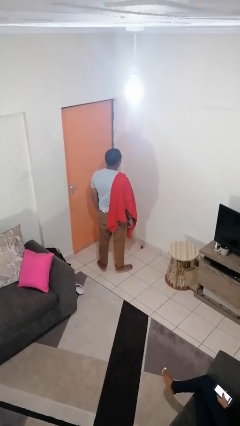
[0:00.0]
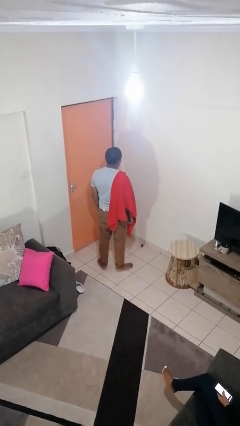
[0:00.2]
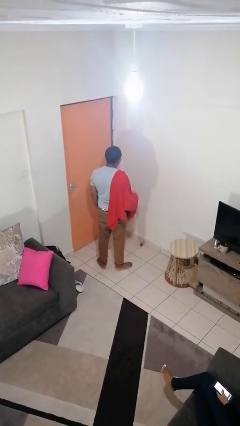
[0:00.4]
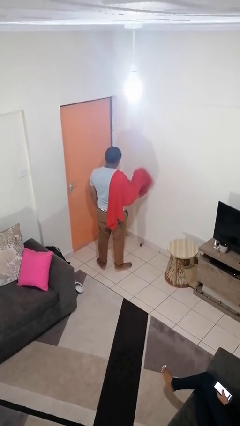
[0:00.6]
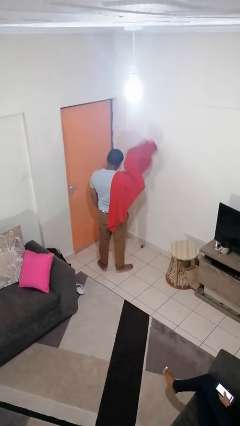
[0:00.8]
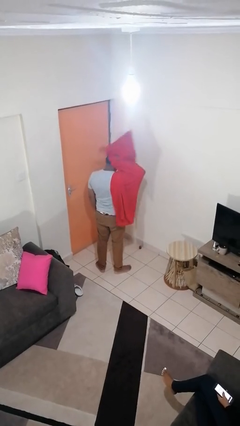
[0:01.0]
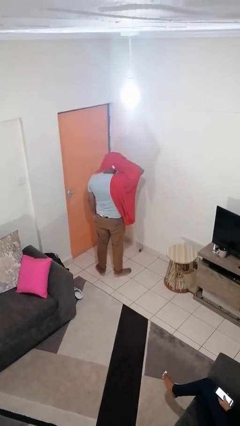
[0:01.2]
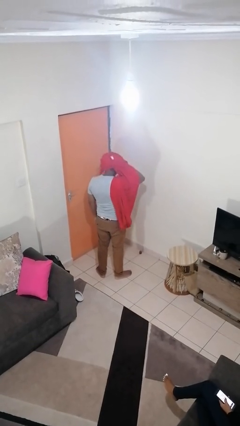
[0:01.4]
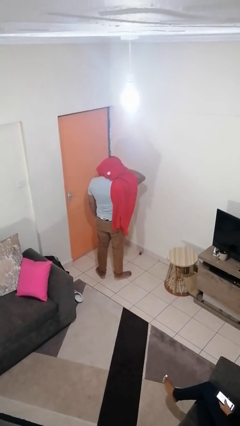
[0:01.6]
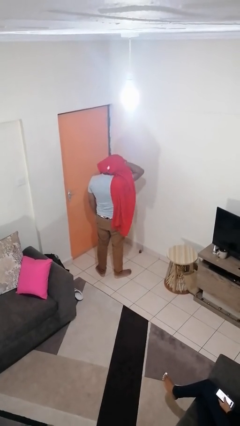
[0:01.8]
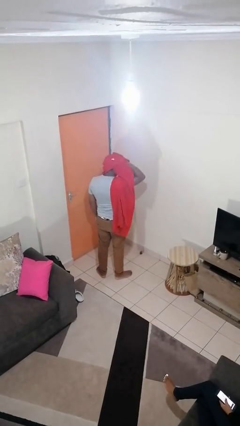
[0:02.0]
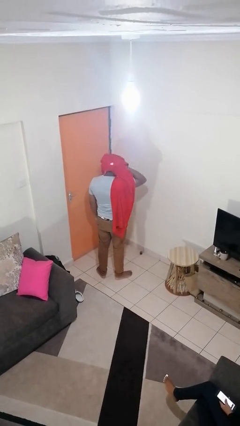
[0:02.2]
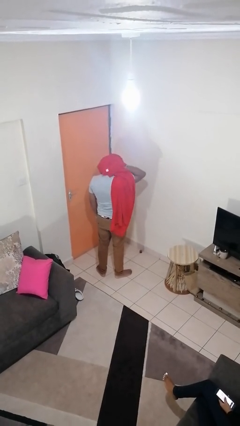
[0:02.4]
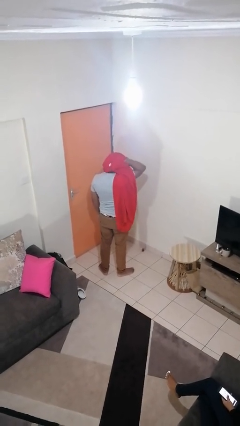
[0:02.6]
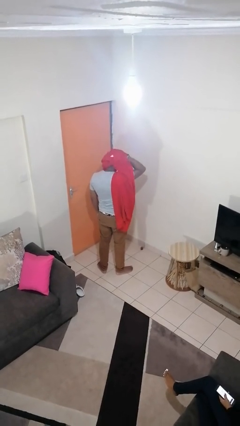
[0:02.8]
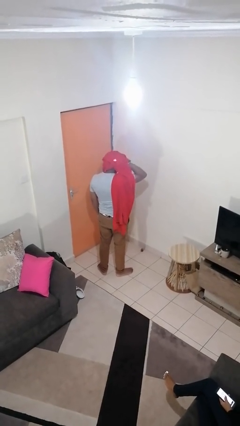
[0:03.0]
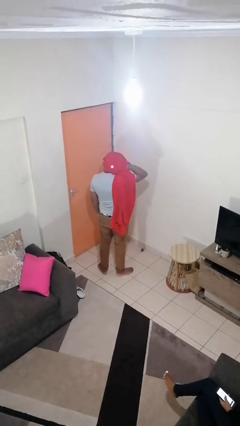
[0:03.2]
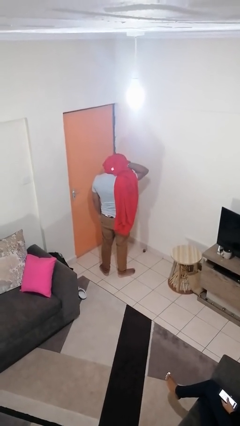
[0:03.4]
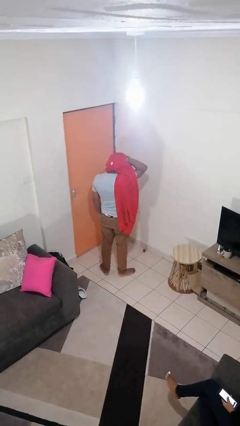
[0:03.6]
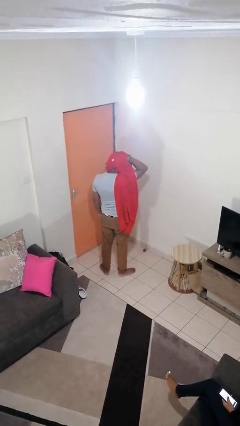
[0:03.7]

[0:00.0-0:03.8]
person dries hair with towel

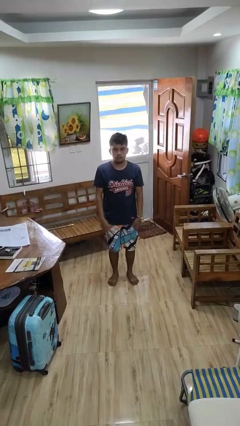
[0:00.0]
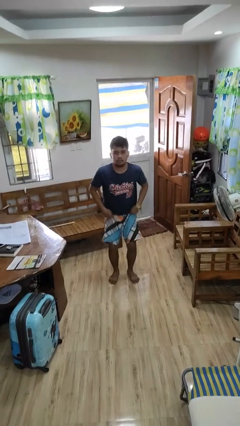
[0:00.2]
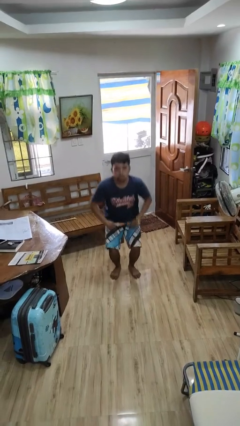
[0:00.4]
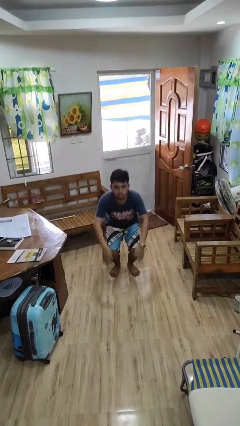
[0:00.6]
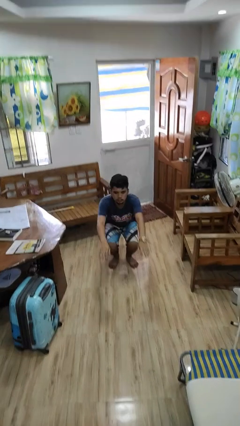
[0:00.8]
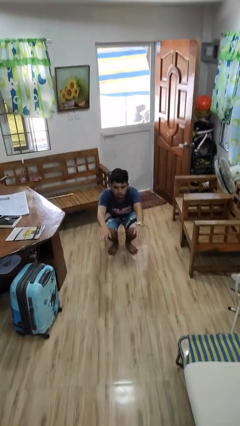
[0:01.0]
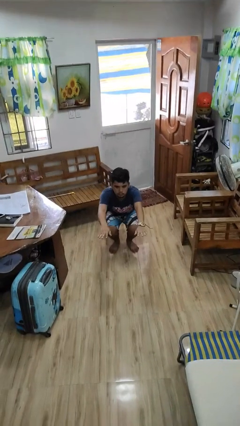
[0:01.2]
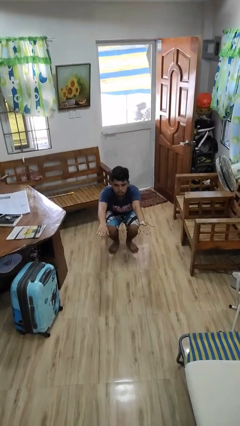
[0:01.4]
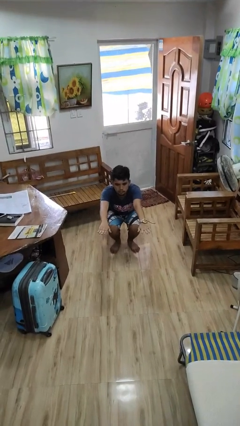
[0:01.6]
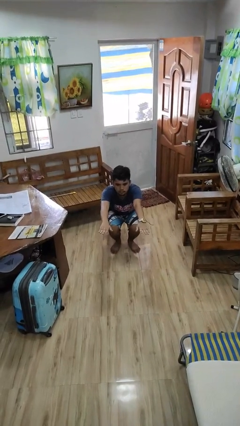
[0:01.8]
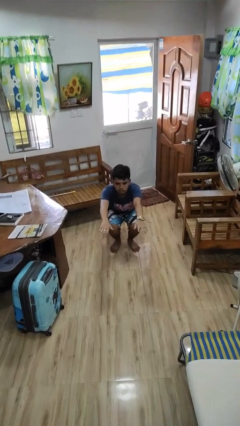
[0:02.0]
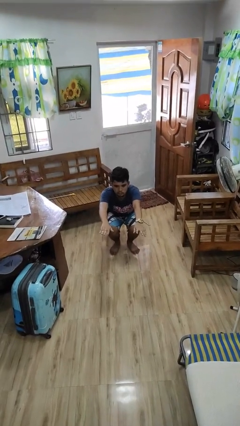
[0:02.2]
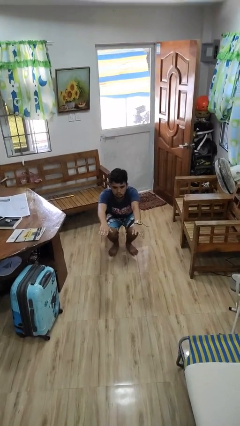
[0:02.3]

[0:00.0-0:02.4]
person squats

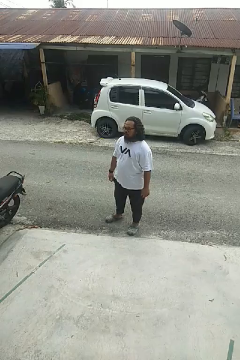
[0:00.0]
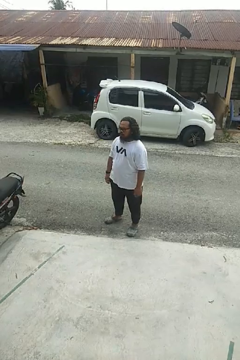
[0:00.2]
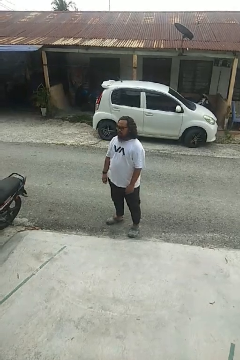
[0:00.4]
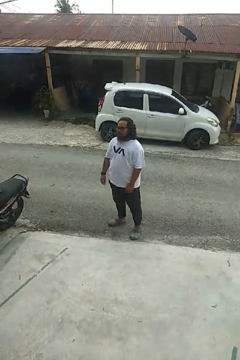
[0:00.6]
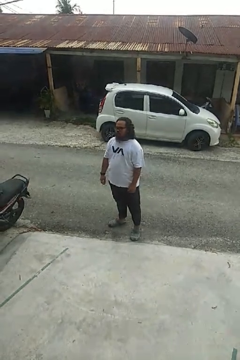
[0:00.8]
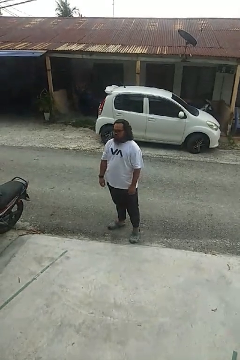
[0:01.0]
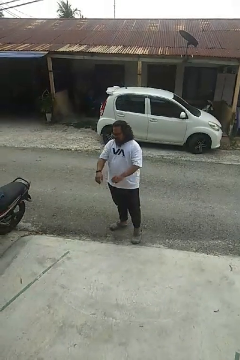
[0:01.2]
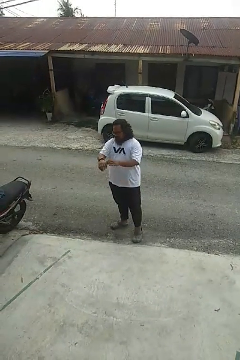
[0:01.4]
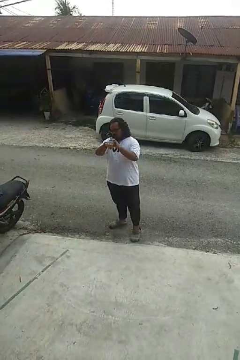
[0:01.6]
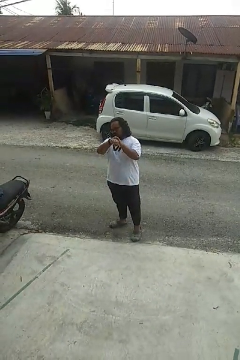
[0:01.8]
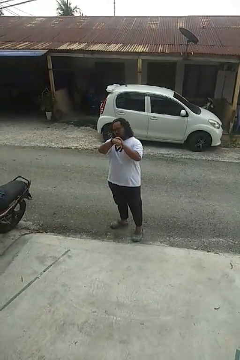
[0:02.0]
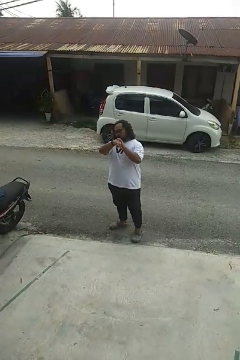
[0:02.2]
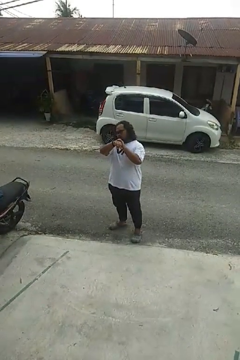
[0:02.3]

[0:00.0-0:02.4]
person looks at wristwatch

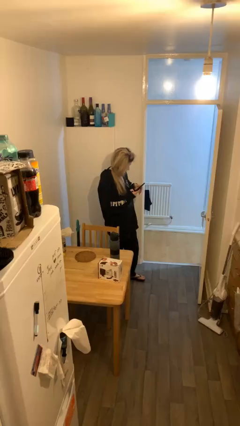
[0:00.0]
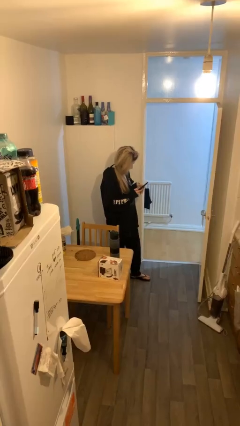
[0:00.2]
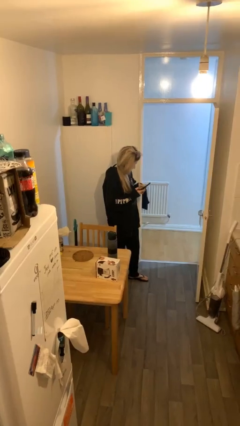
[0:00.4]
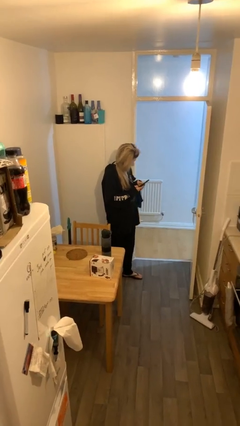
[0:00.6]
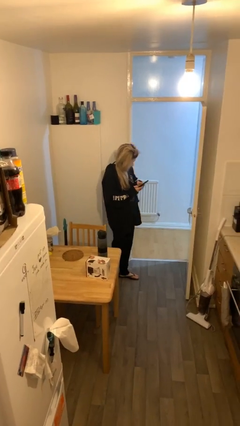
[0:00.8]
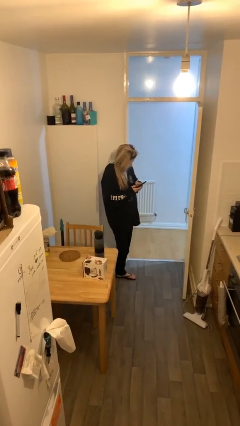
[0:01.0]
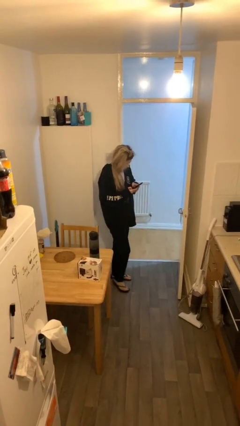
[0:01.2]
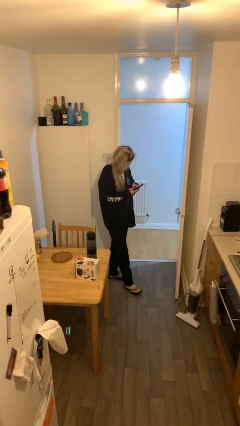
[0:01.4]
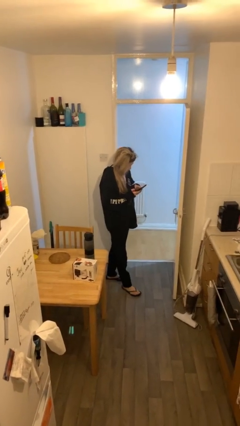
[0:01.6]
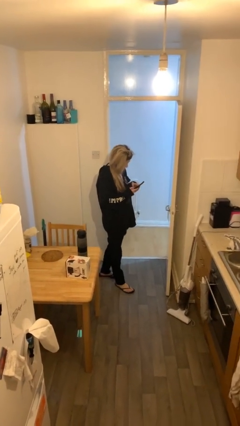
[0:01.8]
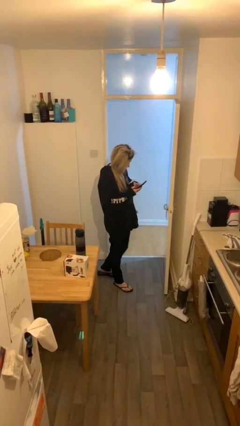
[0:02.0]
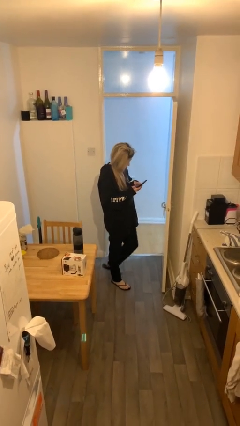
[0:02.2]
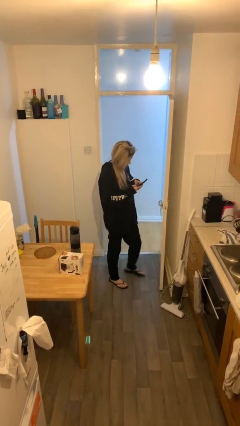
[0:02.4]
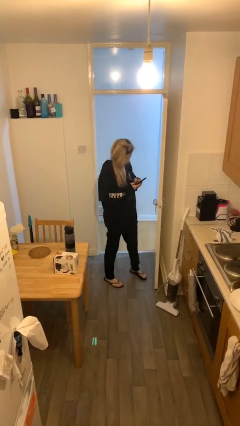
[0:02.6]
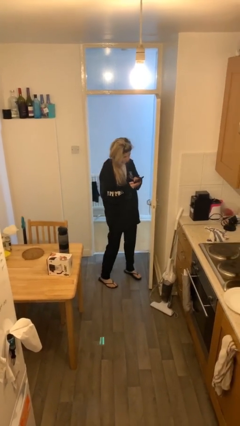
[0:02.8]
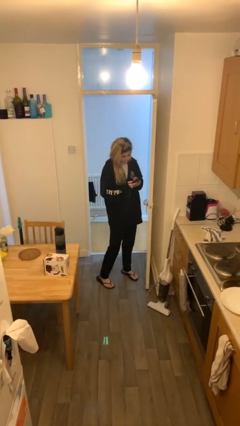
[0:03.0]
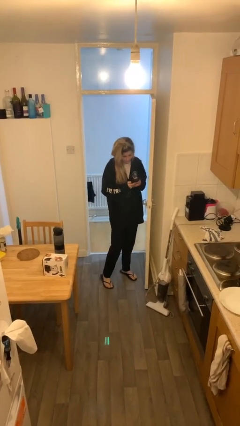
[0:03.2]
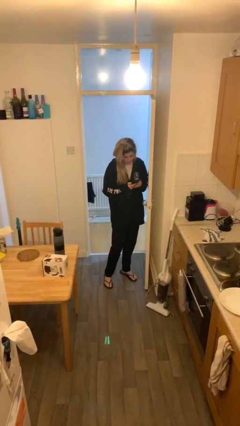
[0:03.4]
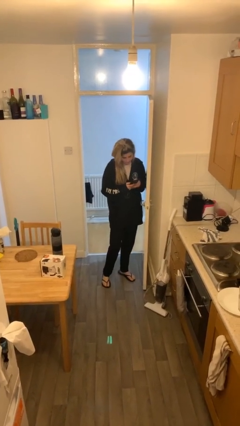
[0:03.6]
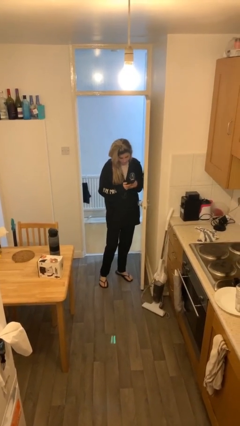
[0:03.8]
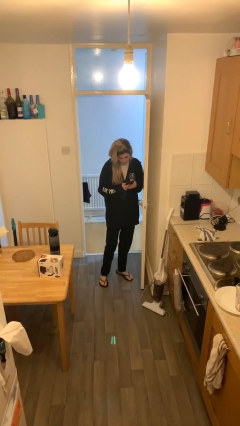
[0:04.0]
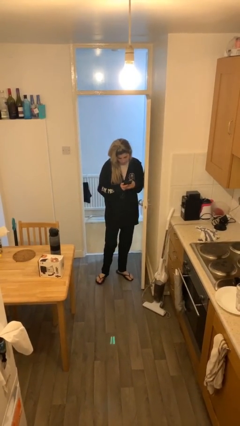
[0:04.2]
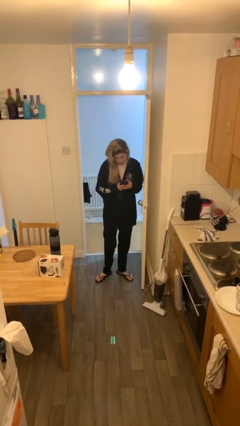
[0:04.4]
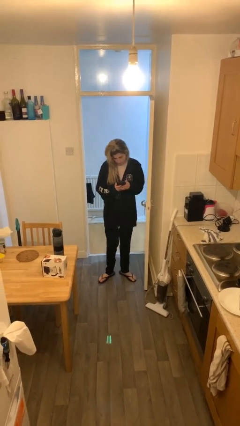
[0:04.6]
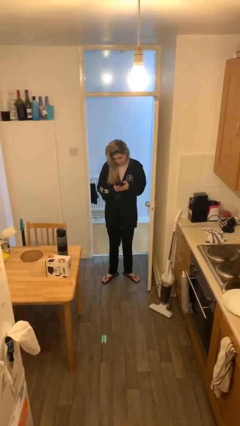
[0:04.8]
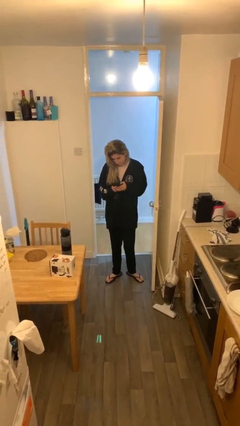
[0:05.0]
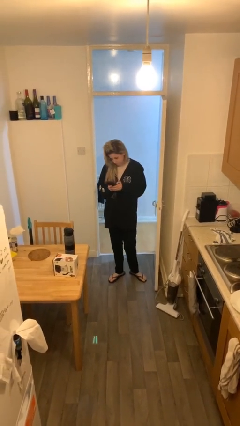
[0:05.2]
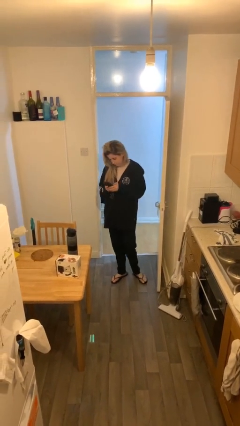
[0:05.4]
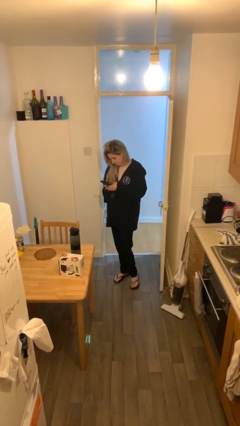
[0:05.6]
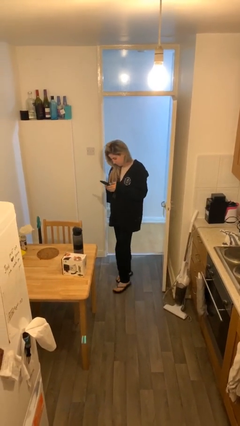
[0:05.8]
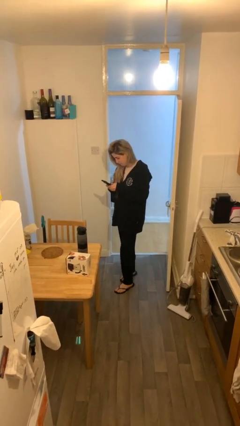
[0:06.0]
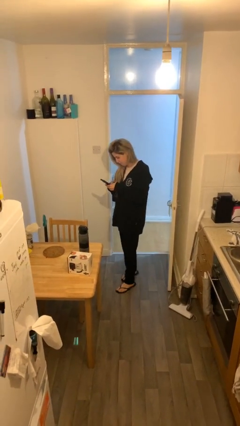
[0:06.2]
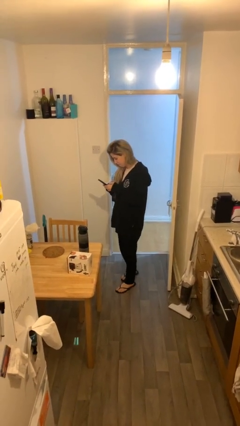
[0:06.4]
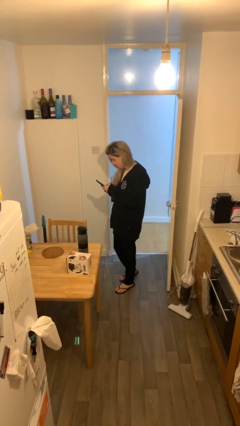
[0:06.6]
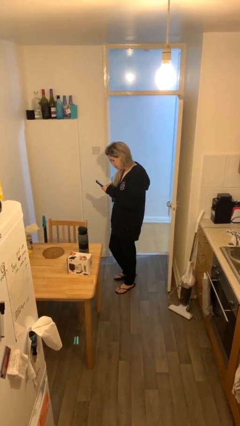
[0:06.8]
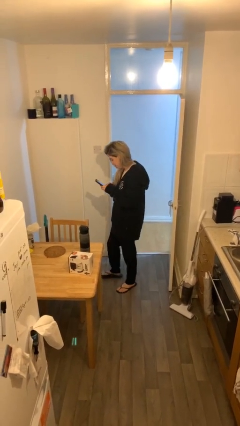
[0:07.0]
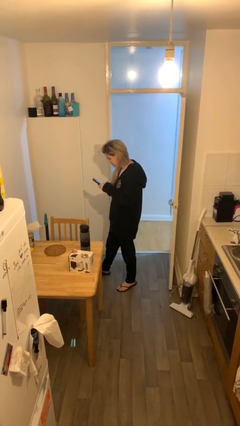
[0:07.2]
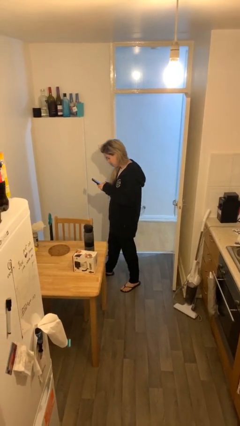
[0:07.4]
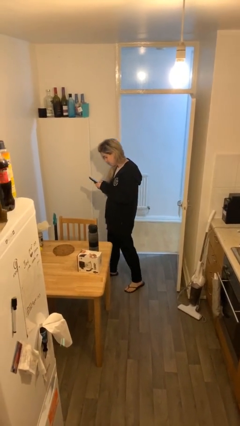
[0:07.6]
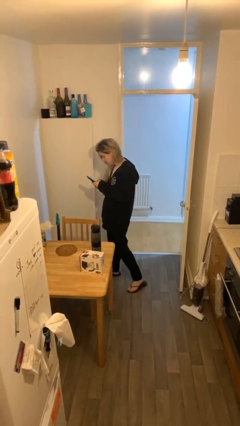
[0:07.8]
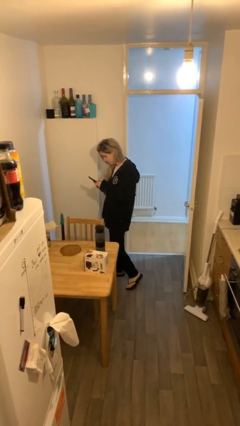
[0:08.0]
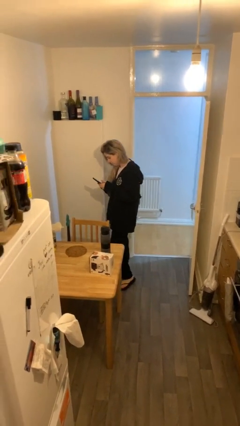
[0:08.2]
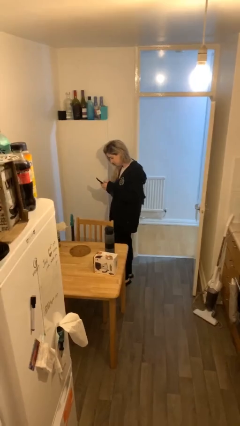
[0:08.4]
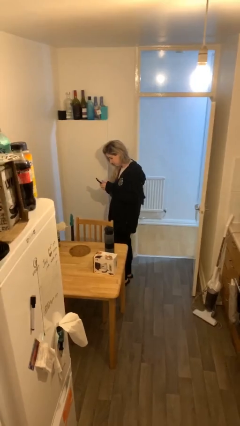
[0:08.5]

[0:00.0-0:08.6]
person texts on phone

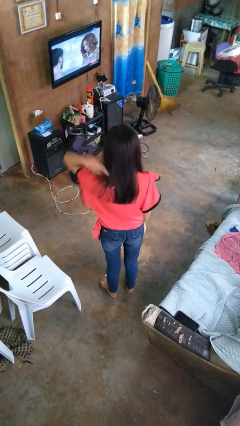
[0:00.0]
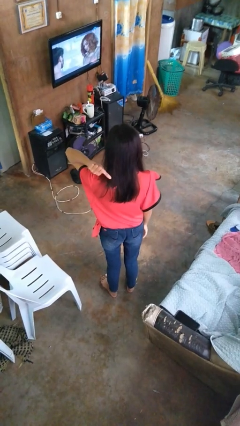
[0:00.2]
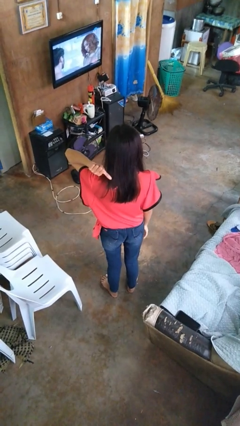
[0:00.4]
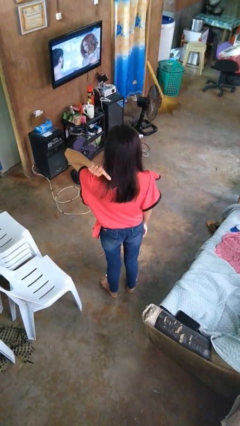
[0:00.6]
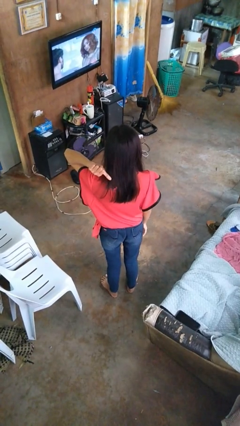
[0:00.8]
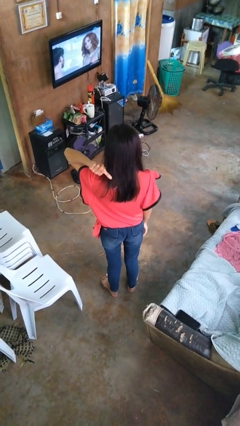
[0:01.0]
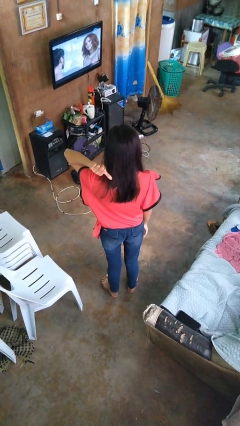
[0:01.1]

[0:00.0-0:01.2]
person gestures behind me
